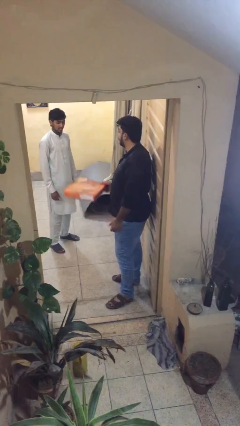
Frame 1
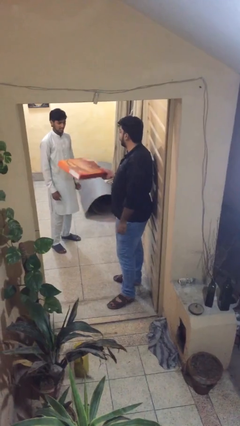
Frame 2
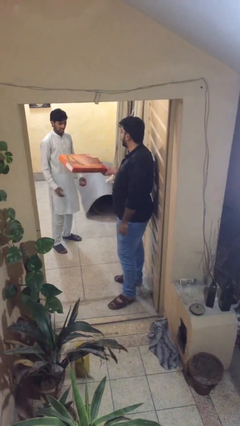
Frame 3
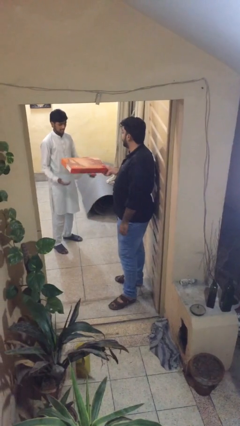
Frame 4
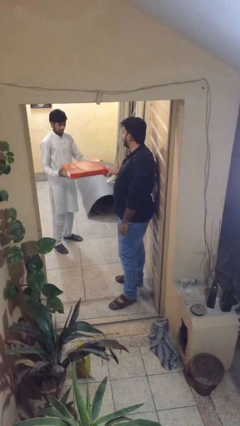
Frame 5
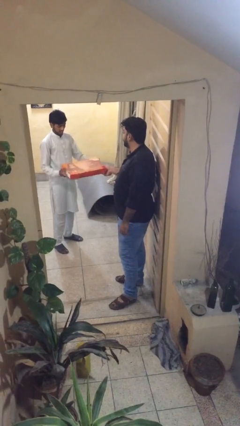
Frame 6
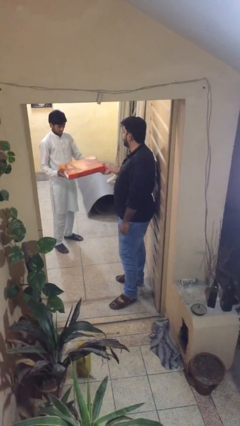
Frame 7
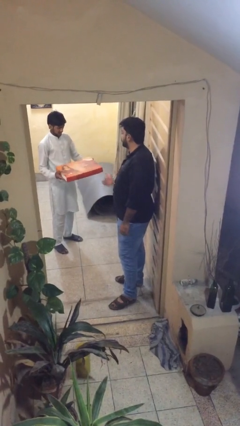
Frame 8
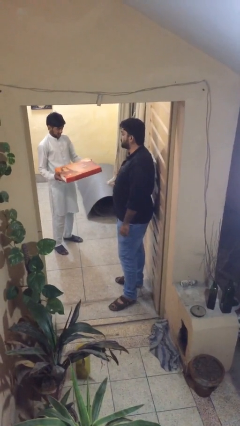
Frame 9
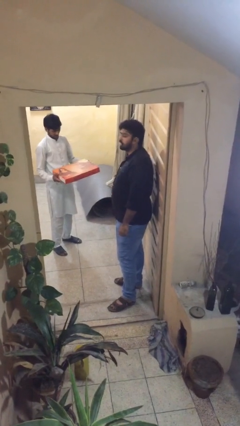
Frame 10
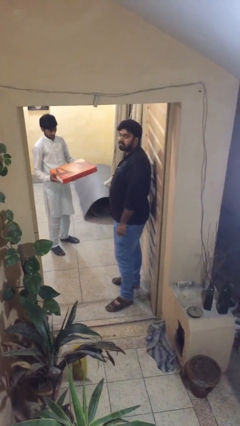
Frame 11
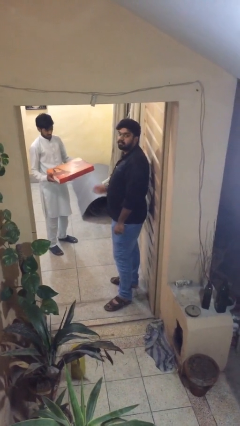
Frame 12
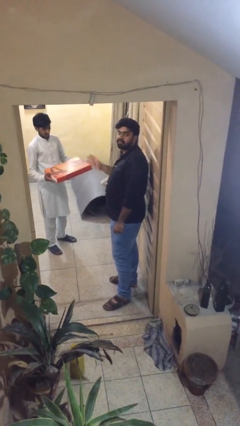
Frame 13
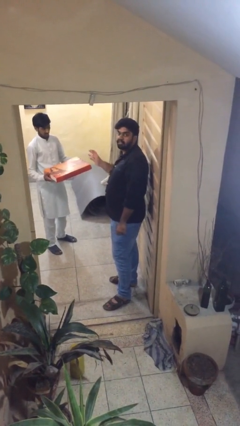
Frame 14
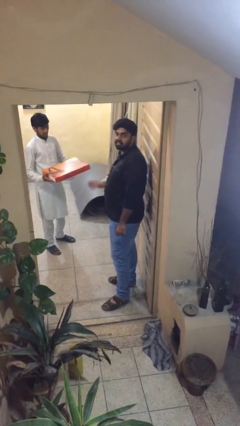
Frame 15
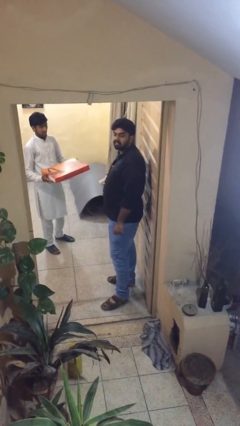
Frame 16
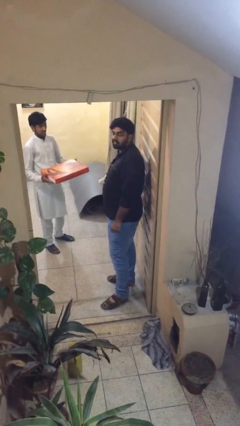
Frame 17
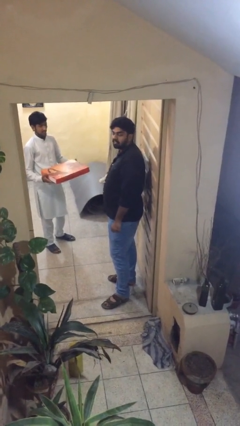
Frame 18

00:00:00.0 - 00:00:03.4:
person transfers object to person

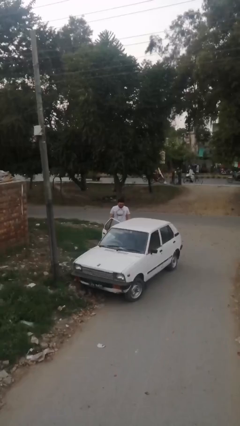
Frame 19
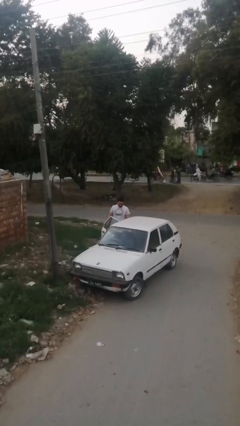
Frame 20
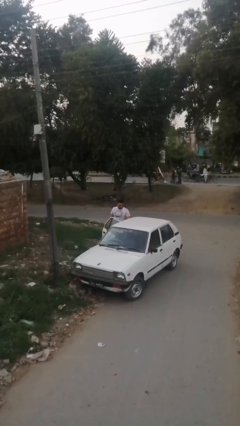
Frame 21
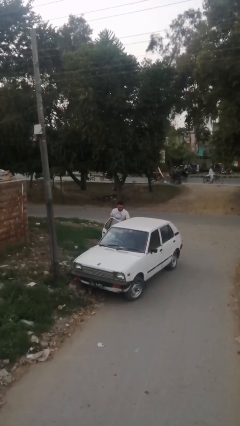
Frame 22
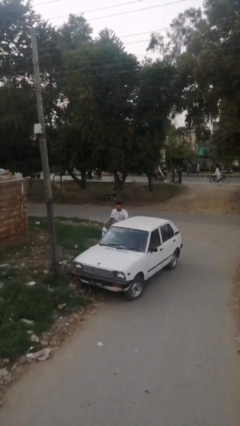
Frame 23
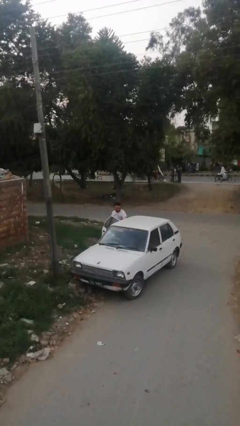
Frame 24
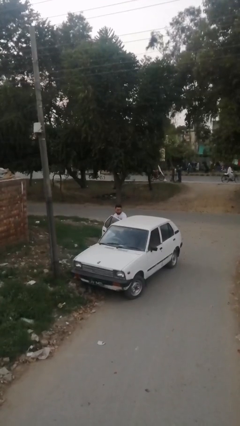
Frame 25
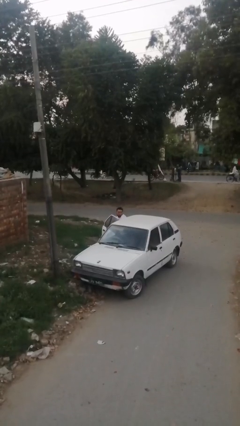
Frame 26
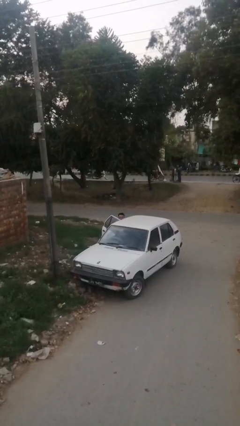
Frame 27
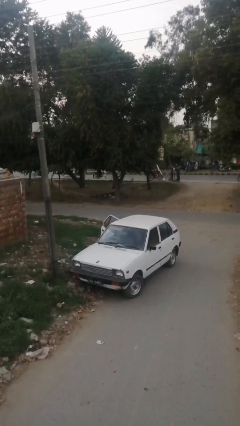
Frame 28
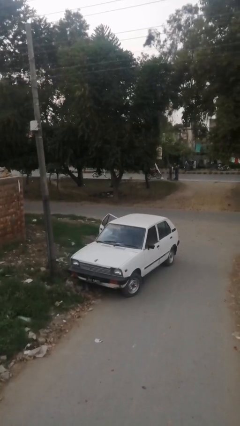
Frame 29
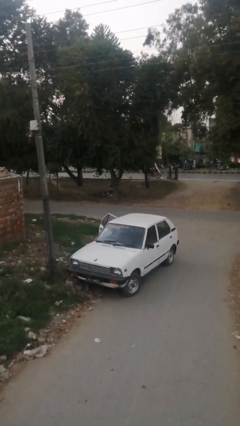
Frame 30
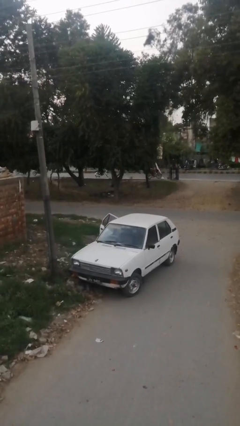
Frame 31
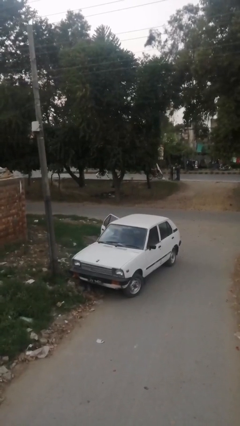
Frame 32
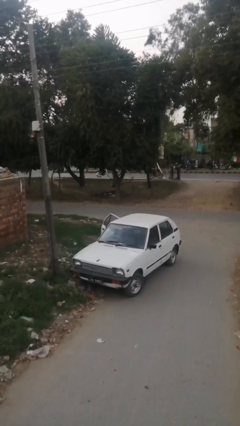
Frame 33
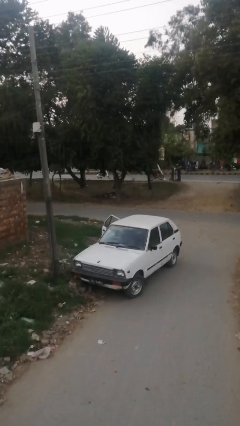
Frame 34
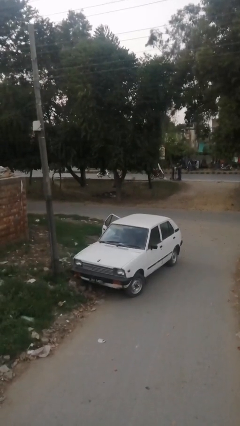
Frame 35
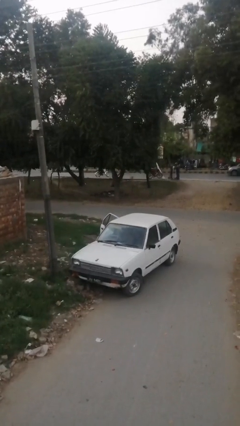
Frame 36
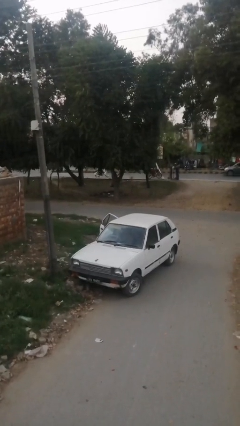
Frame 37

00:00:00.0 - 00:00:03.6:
person enters car

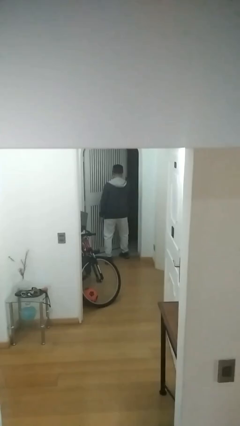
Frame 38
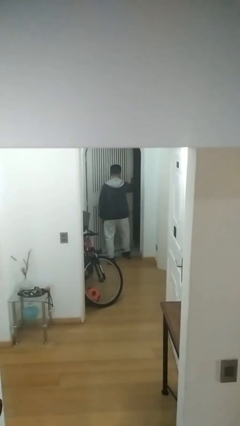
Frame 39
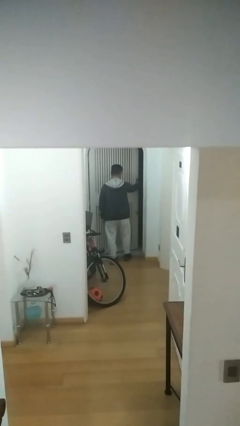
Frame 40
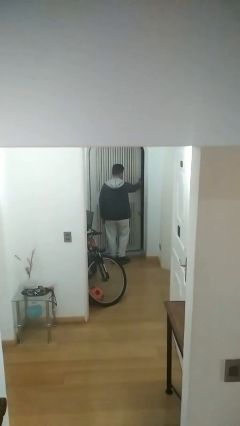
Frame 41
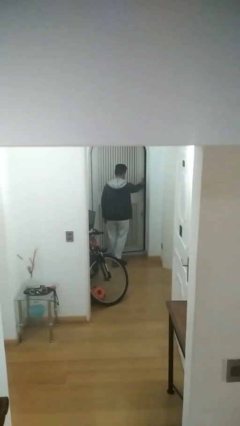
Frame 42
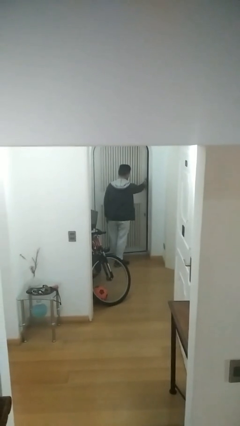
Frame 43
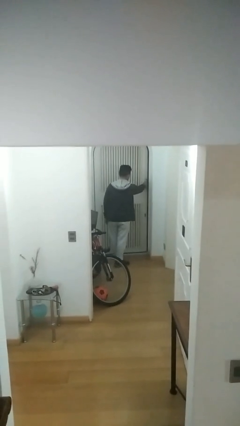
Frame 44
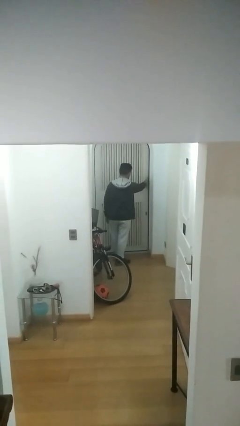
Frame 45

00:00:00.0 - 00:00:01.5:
person closes facility door

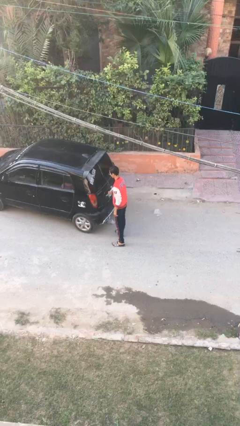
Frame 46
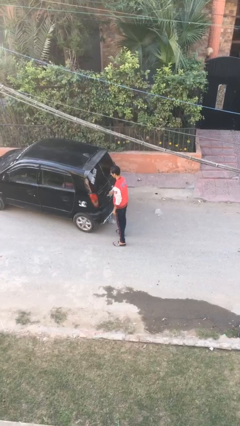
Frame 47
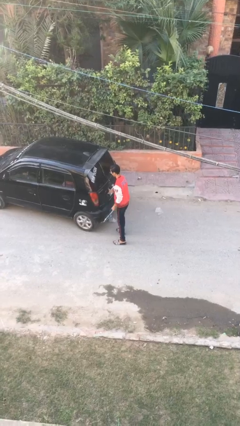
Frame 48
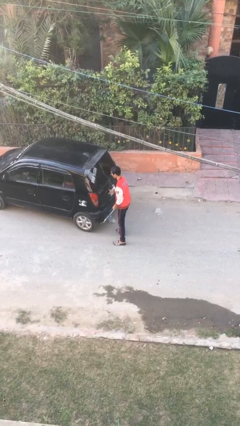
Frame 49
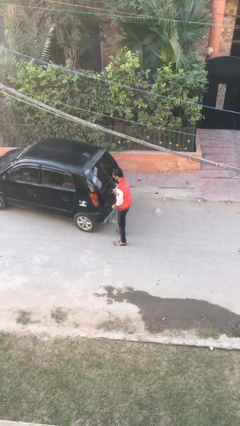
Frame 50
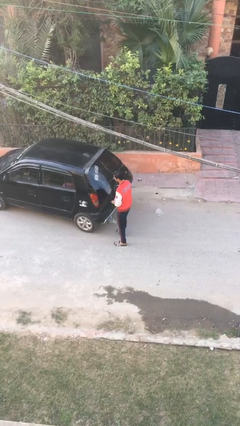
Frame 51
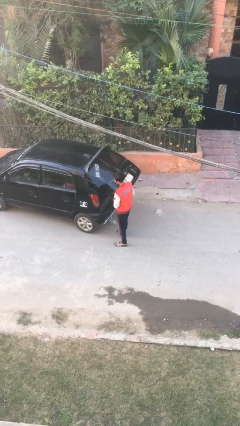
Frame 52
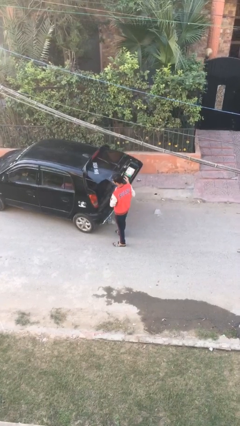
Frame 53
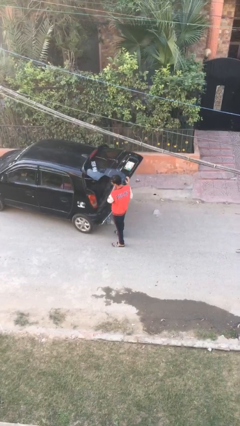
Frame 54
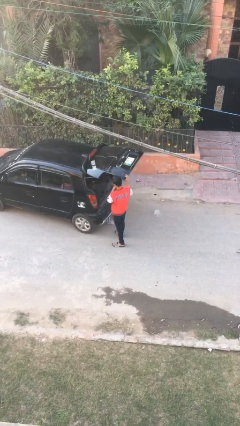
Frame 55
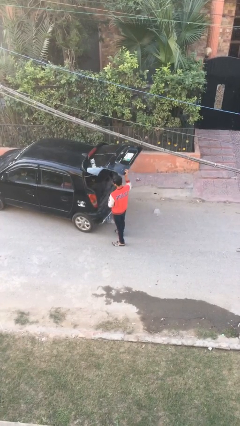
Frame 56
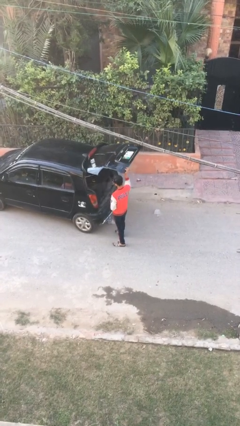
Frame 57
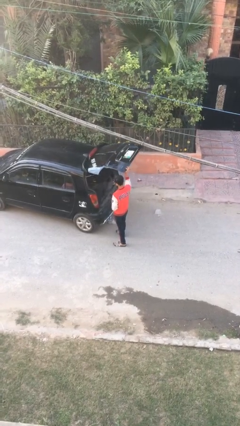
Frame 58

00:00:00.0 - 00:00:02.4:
person opens car trunk

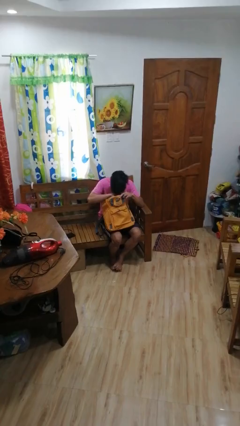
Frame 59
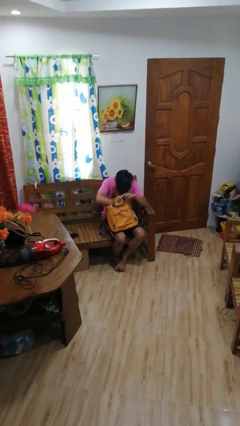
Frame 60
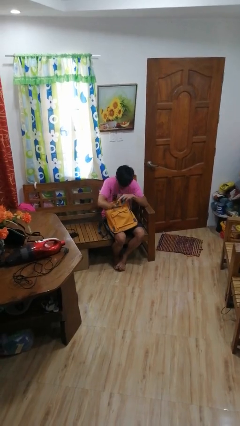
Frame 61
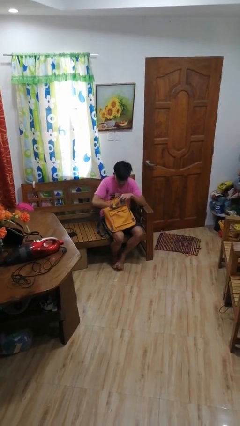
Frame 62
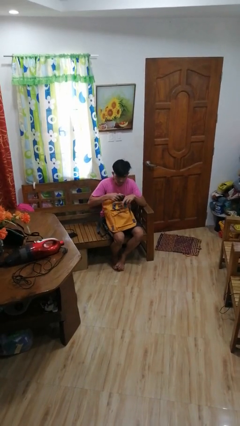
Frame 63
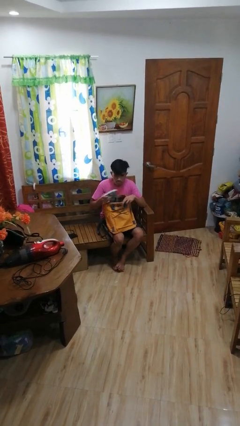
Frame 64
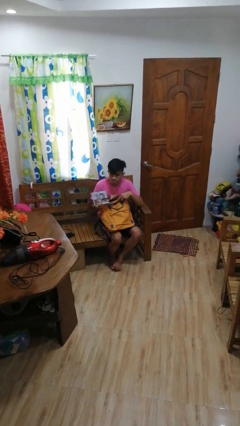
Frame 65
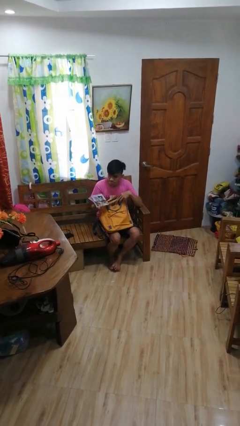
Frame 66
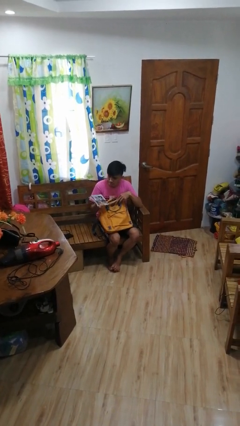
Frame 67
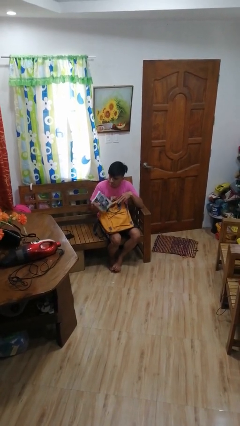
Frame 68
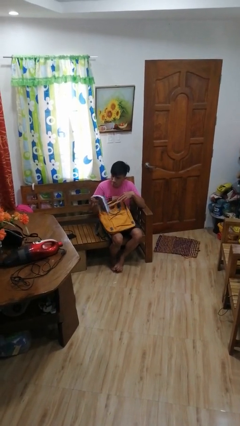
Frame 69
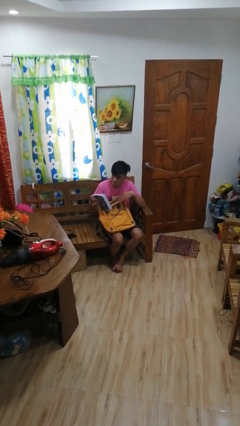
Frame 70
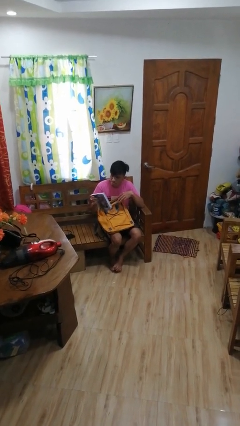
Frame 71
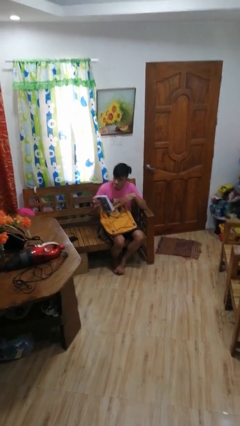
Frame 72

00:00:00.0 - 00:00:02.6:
person takes object from backpack

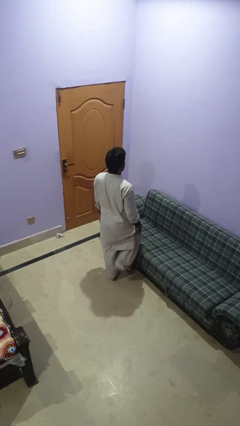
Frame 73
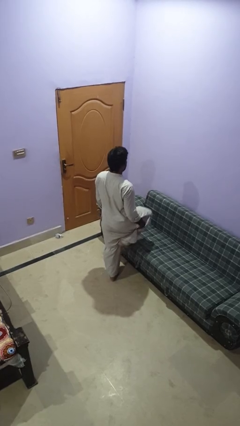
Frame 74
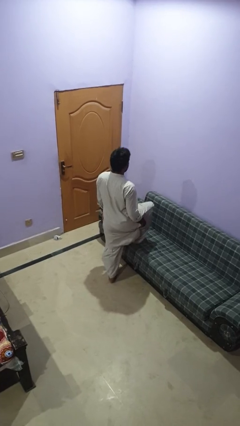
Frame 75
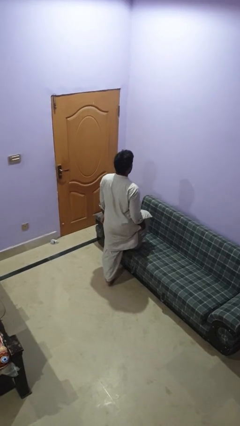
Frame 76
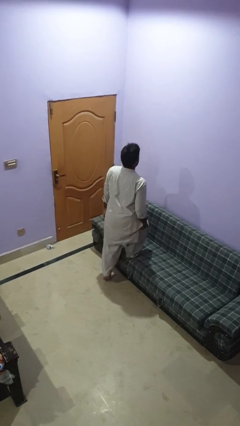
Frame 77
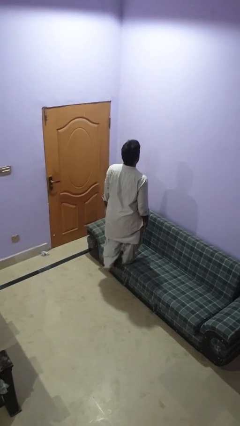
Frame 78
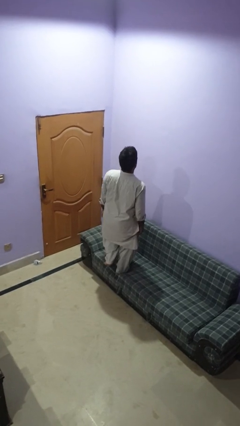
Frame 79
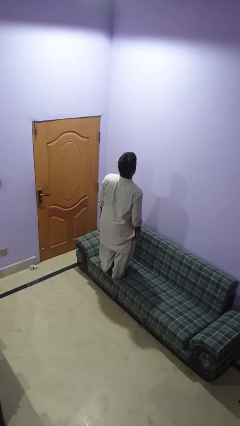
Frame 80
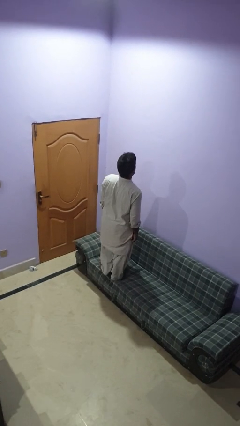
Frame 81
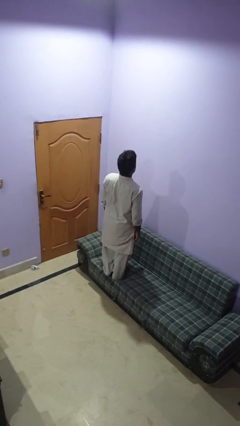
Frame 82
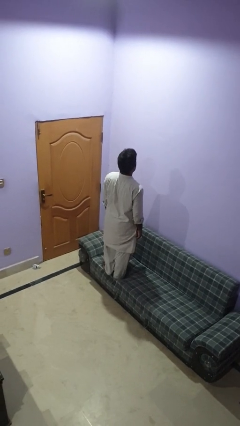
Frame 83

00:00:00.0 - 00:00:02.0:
person climbs on couch

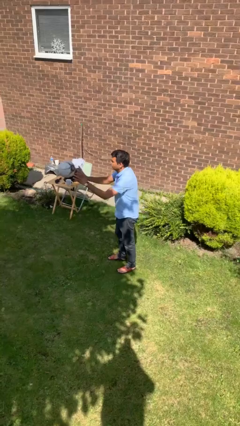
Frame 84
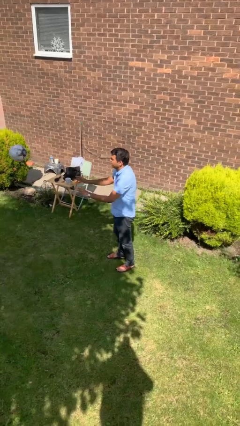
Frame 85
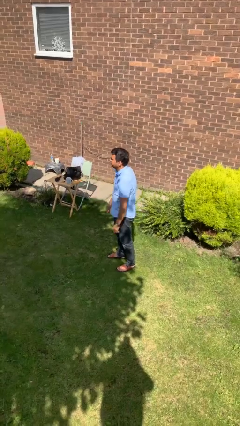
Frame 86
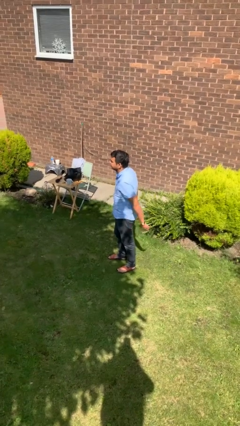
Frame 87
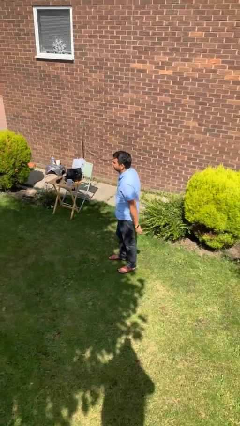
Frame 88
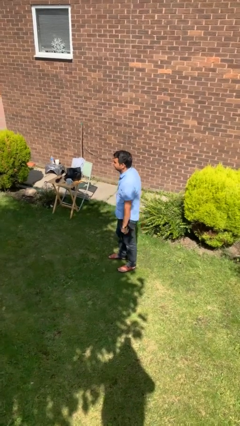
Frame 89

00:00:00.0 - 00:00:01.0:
person throws object to person

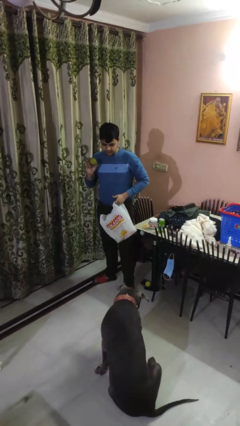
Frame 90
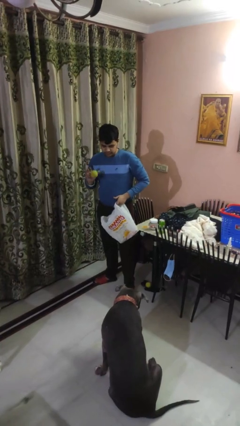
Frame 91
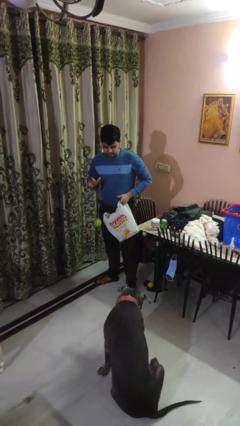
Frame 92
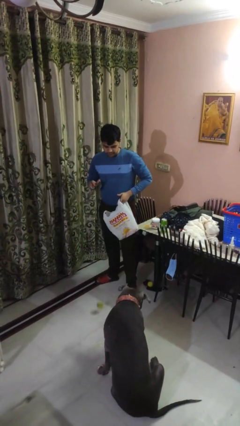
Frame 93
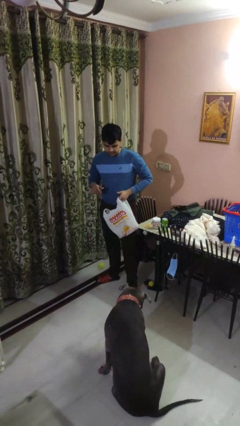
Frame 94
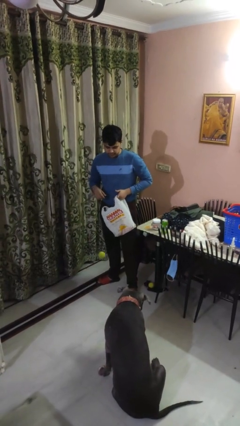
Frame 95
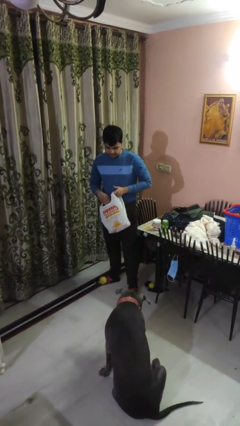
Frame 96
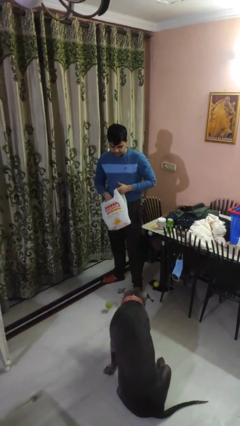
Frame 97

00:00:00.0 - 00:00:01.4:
person throws object to dog
